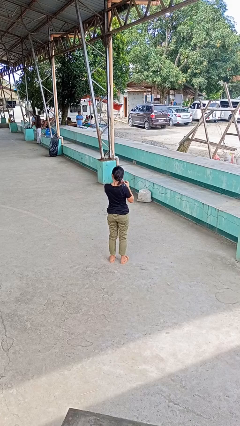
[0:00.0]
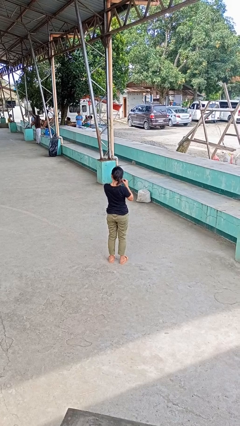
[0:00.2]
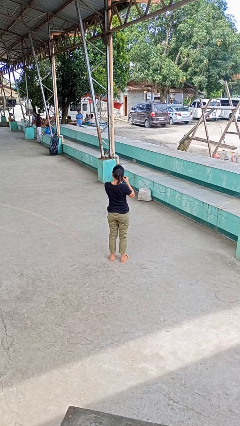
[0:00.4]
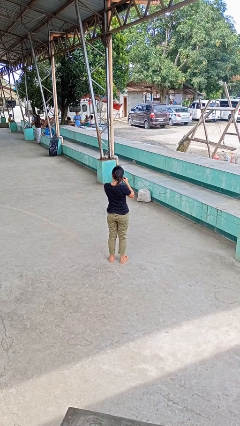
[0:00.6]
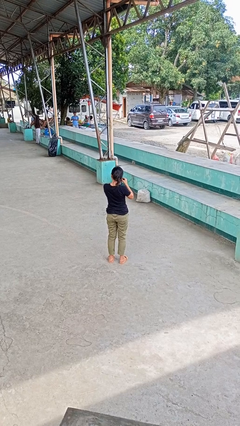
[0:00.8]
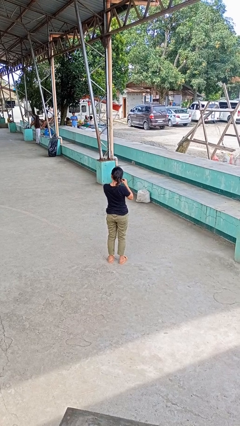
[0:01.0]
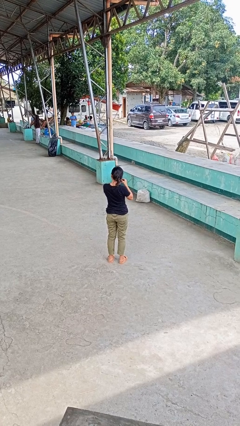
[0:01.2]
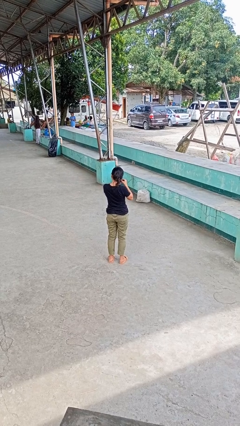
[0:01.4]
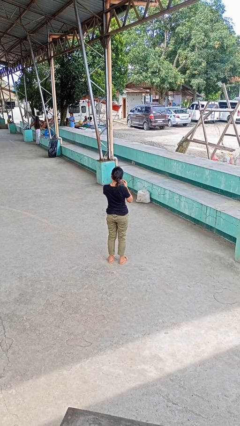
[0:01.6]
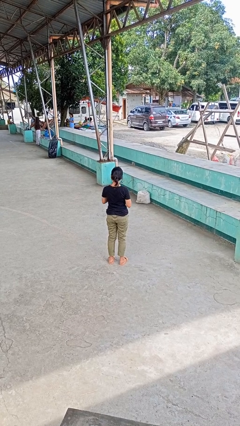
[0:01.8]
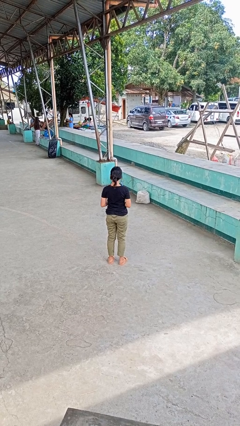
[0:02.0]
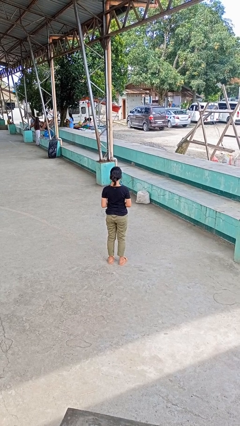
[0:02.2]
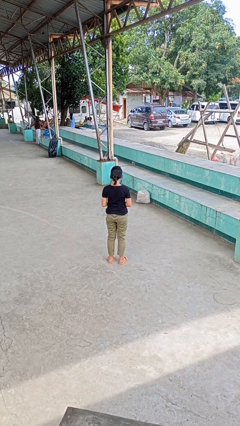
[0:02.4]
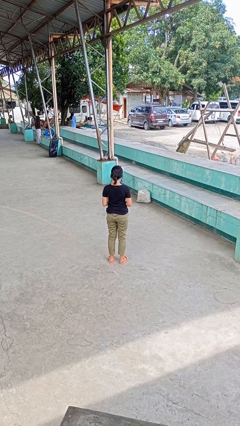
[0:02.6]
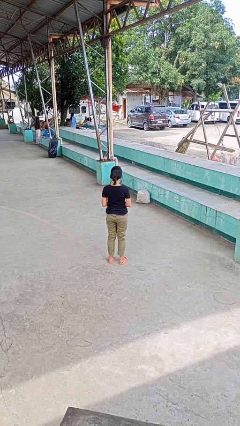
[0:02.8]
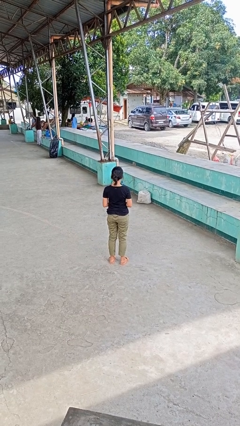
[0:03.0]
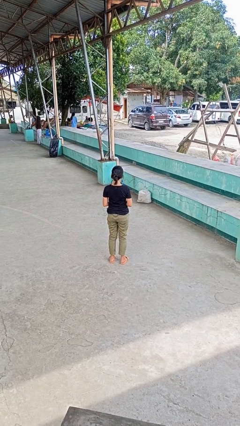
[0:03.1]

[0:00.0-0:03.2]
person puts on earrings

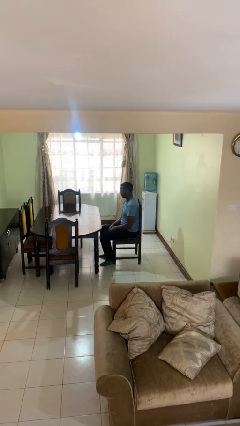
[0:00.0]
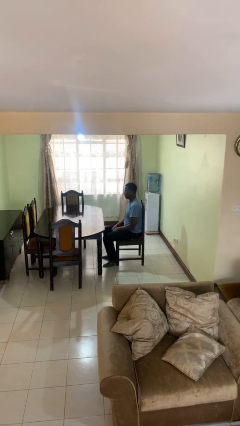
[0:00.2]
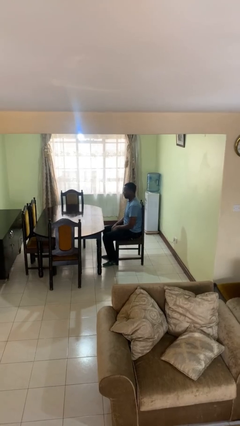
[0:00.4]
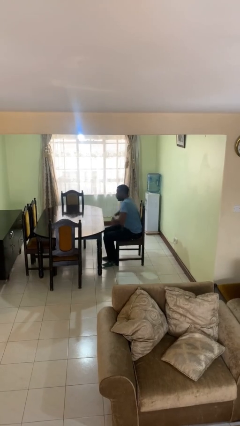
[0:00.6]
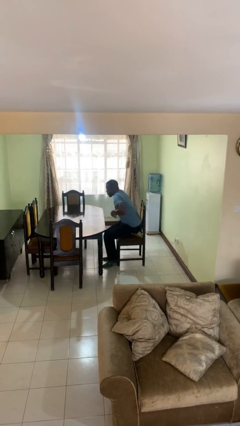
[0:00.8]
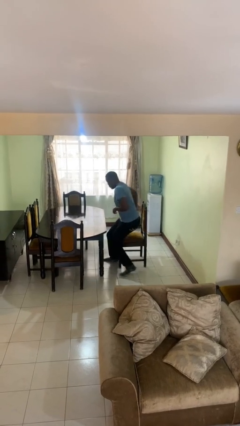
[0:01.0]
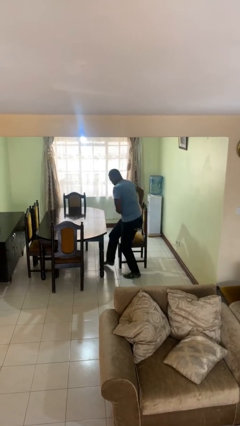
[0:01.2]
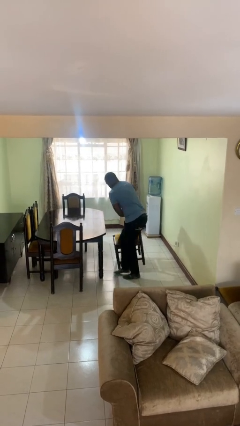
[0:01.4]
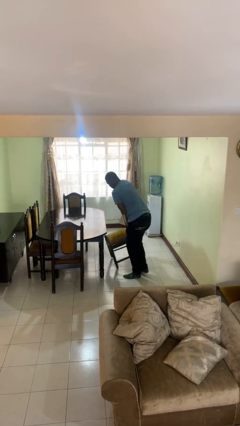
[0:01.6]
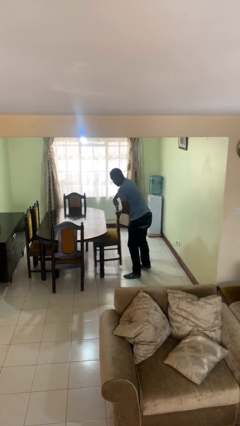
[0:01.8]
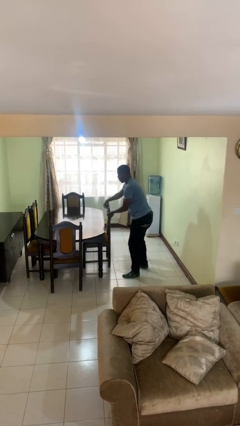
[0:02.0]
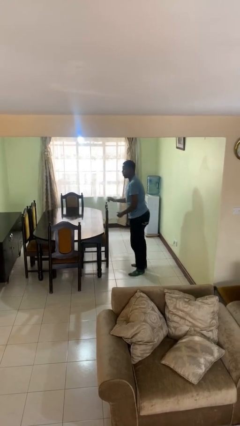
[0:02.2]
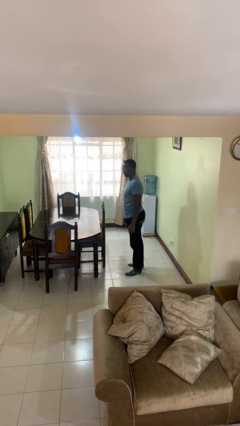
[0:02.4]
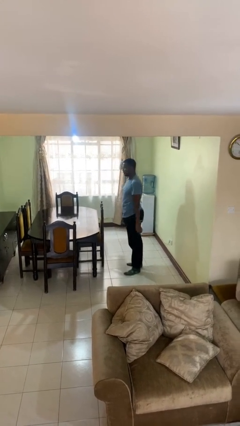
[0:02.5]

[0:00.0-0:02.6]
person stands up

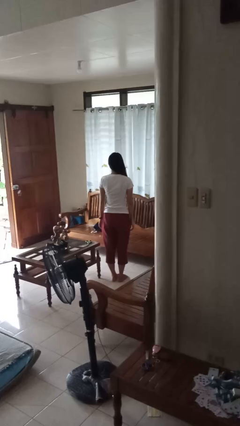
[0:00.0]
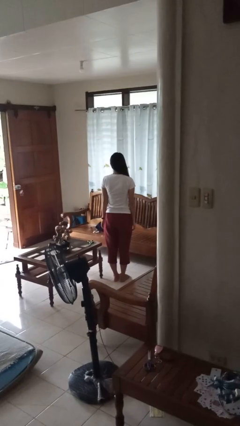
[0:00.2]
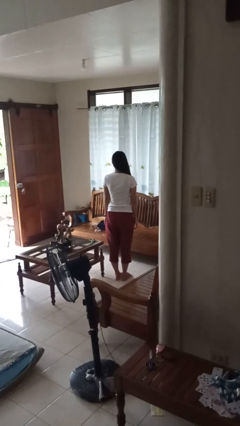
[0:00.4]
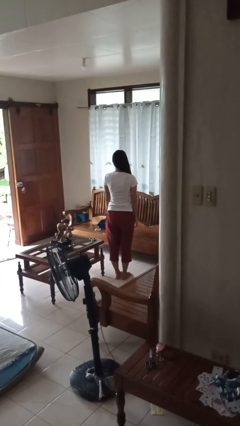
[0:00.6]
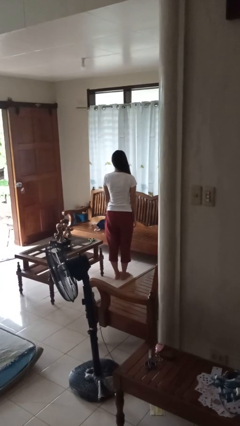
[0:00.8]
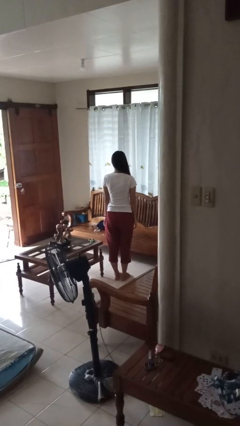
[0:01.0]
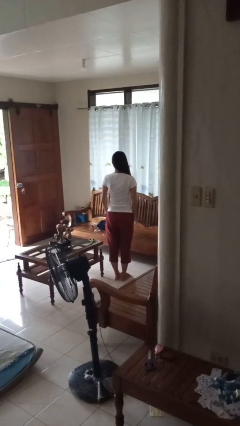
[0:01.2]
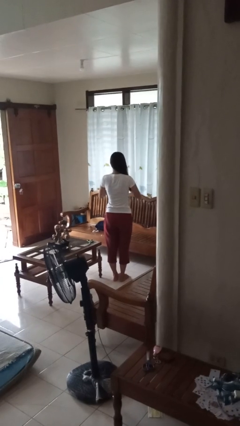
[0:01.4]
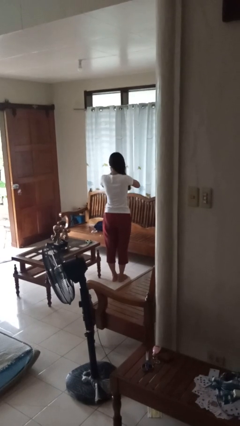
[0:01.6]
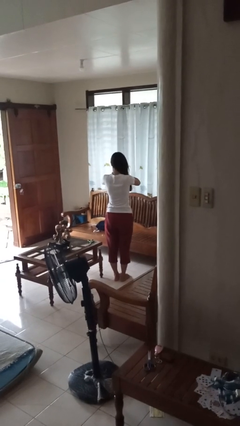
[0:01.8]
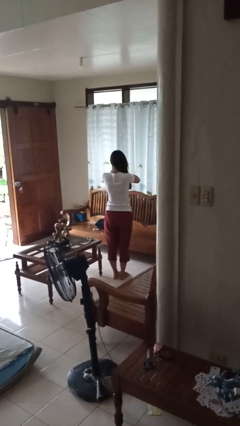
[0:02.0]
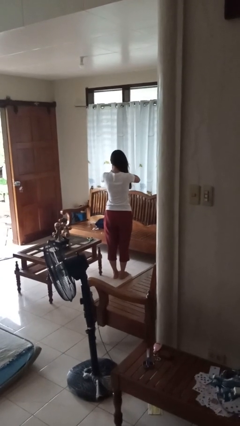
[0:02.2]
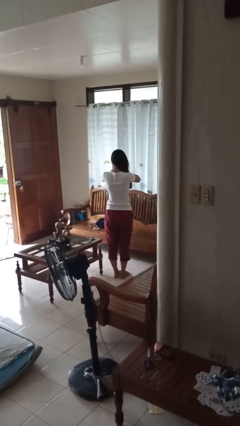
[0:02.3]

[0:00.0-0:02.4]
person covers face with hands

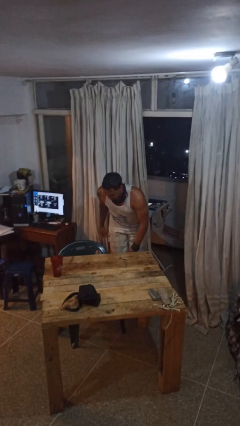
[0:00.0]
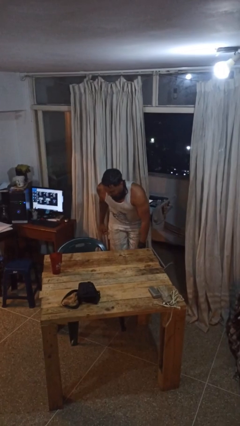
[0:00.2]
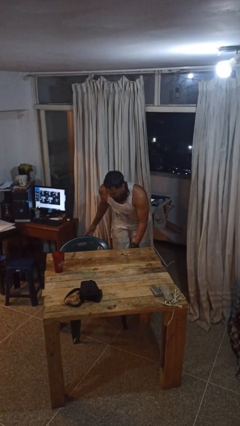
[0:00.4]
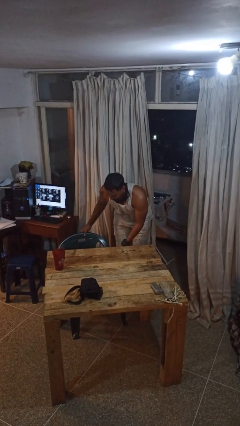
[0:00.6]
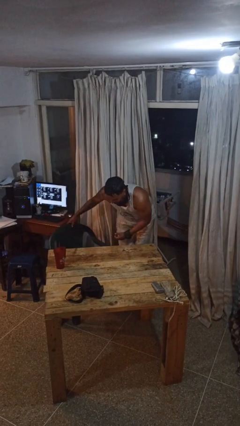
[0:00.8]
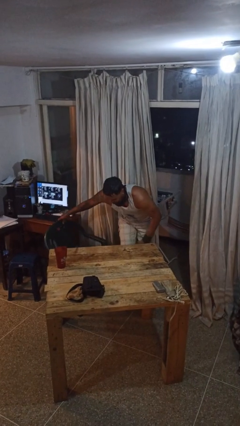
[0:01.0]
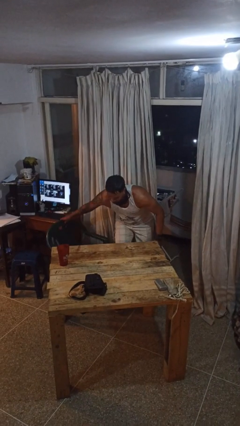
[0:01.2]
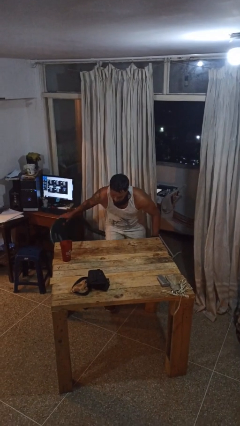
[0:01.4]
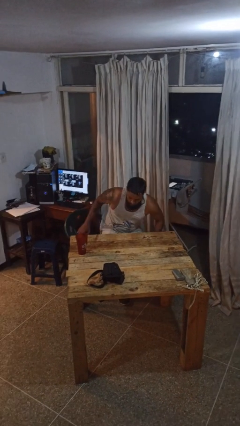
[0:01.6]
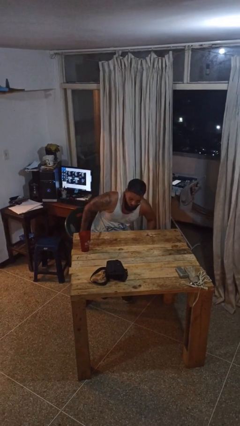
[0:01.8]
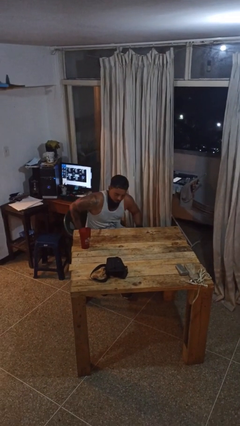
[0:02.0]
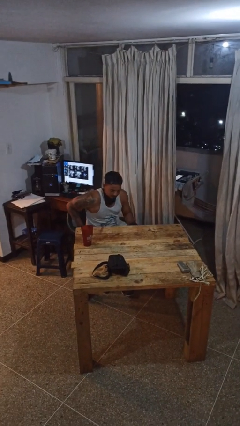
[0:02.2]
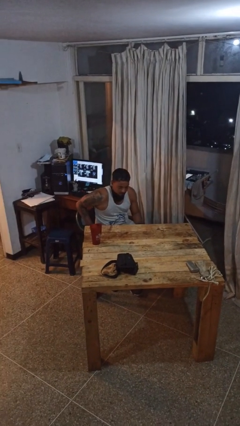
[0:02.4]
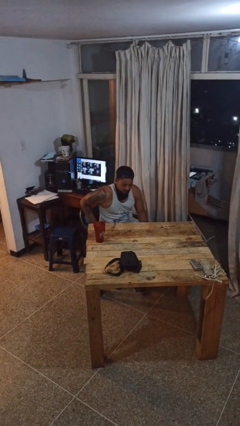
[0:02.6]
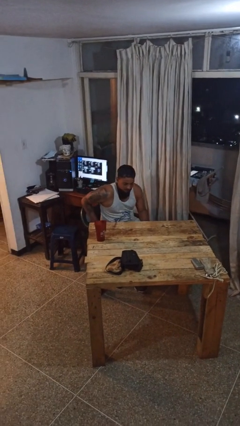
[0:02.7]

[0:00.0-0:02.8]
person sits down

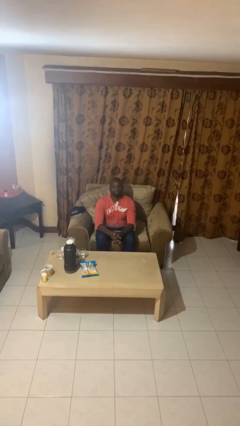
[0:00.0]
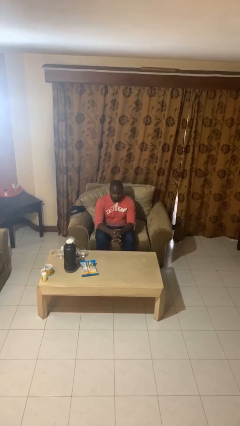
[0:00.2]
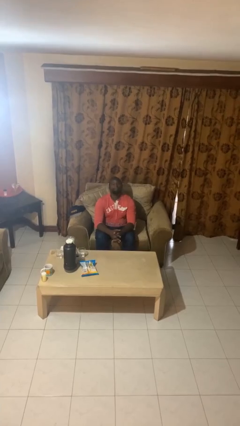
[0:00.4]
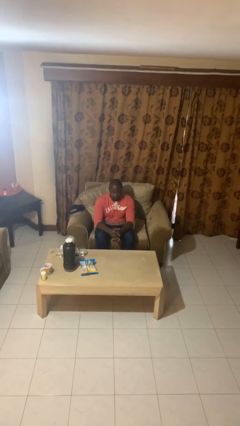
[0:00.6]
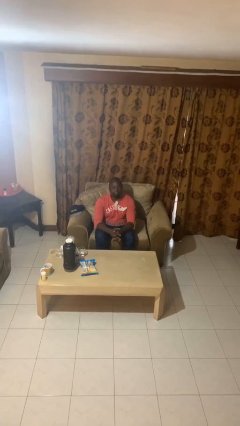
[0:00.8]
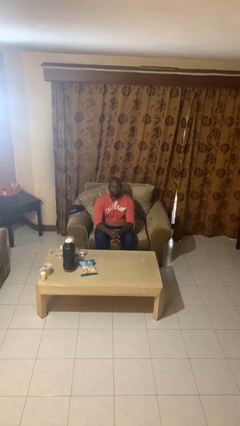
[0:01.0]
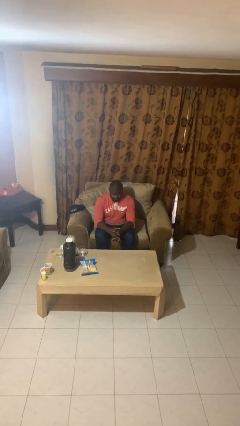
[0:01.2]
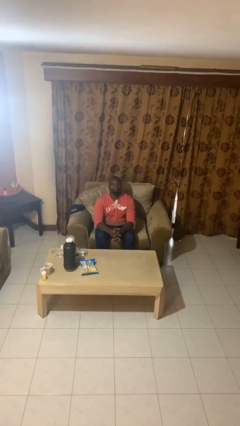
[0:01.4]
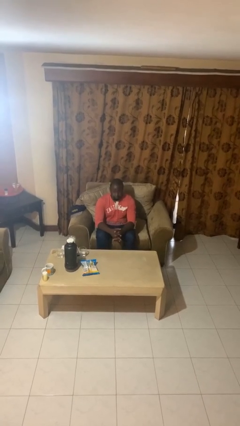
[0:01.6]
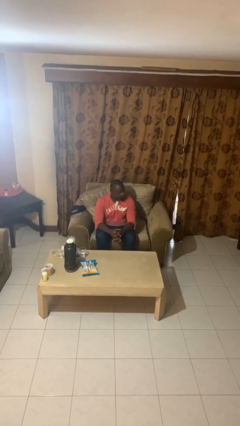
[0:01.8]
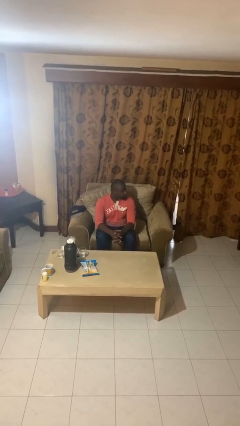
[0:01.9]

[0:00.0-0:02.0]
person nods head

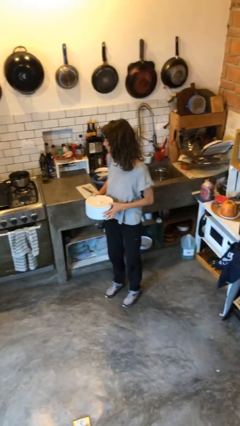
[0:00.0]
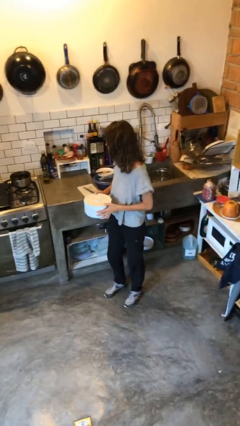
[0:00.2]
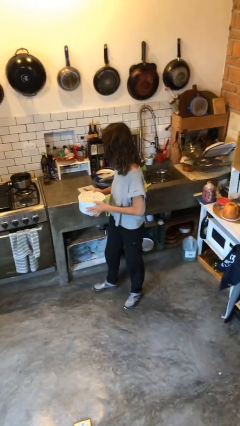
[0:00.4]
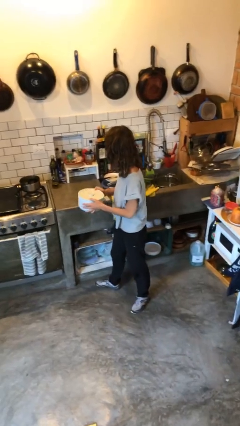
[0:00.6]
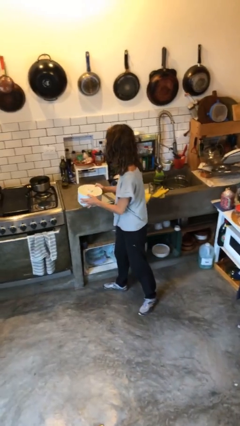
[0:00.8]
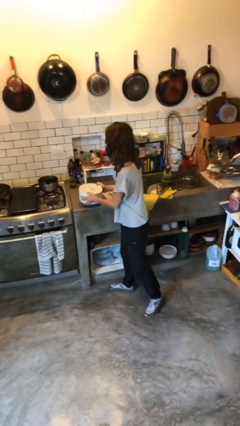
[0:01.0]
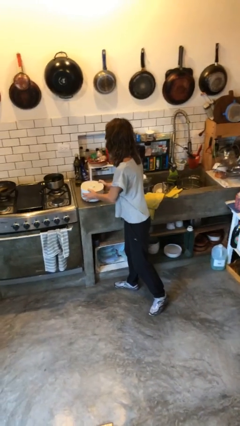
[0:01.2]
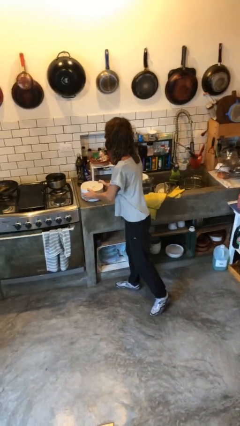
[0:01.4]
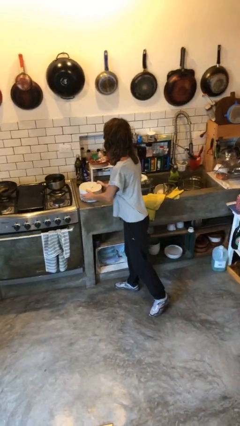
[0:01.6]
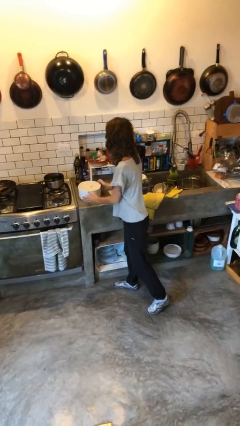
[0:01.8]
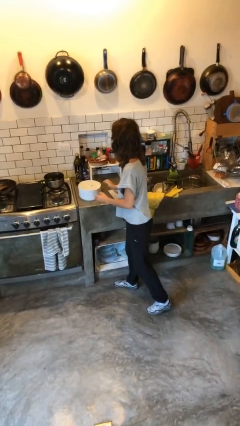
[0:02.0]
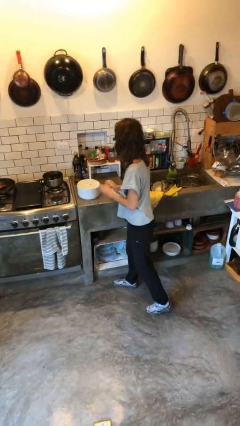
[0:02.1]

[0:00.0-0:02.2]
person puts down object on countertop

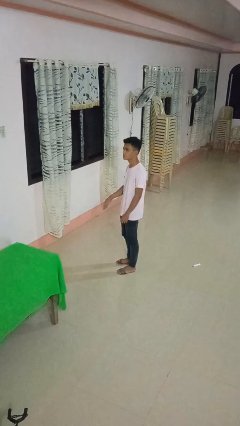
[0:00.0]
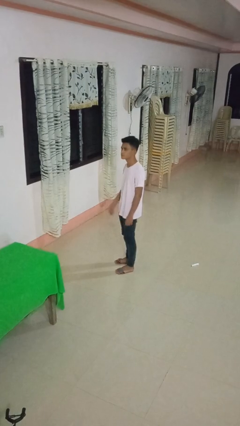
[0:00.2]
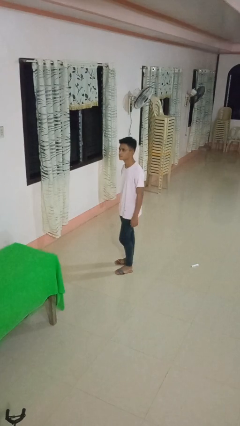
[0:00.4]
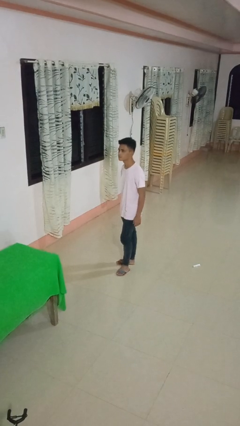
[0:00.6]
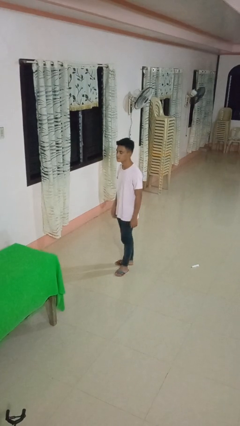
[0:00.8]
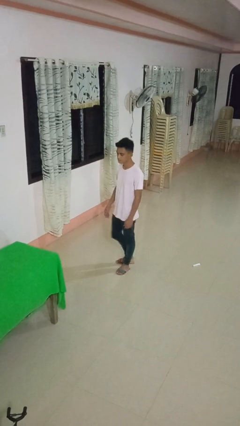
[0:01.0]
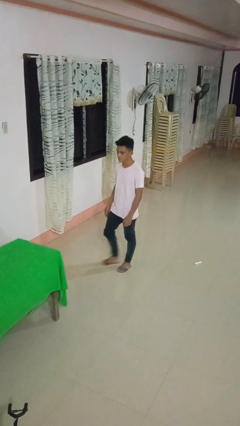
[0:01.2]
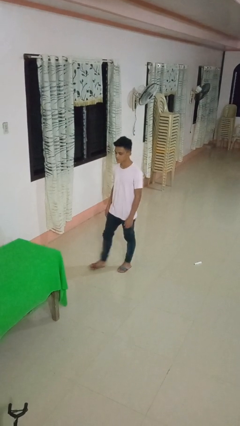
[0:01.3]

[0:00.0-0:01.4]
person slaps hands on thighs
